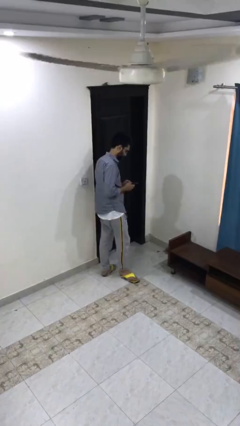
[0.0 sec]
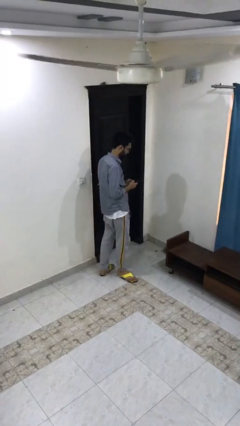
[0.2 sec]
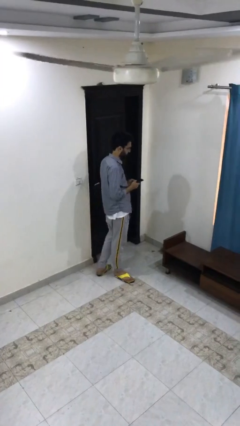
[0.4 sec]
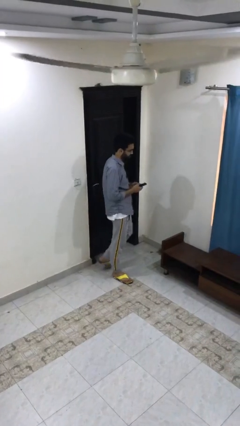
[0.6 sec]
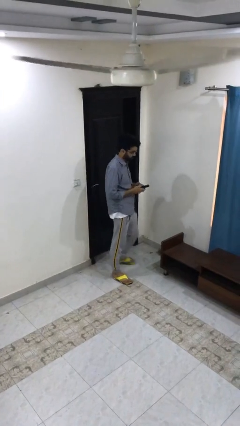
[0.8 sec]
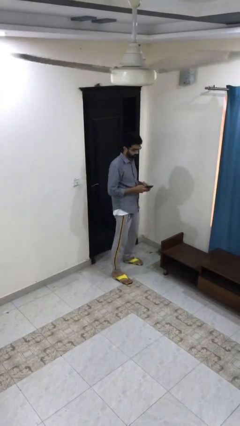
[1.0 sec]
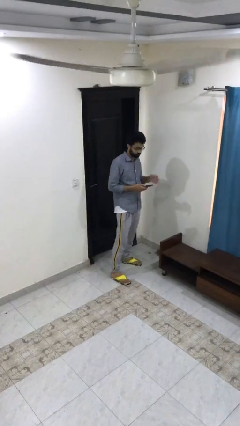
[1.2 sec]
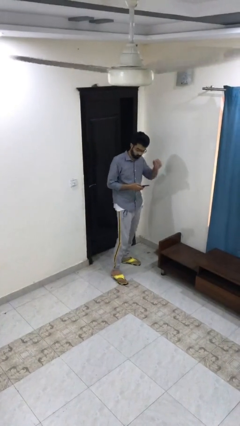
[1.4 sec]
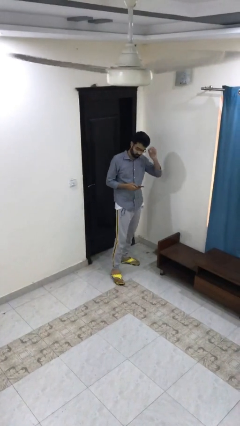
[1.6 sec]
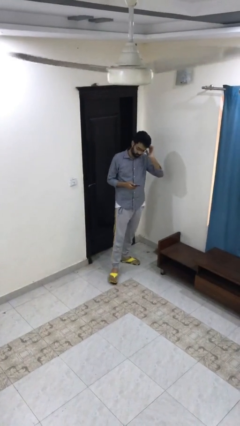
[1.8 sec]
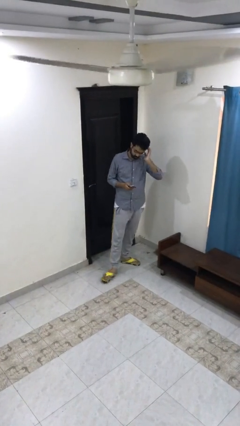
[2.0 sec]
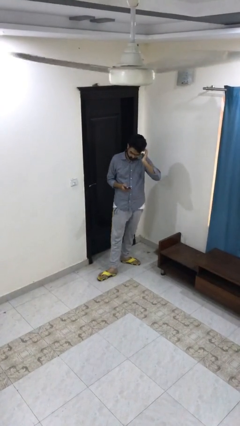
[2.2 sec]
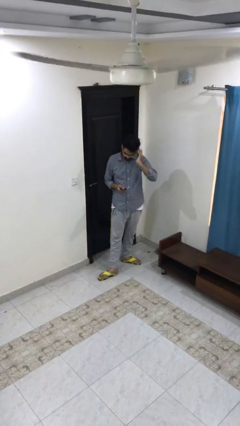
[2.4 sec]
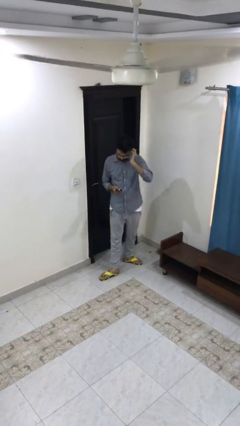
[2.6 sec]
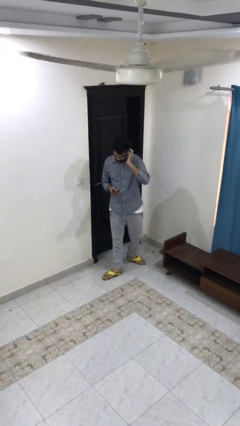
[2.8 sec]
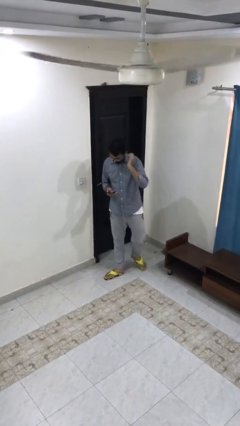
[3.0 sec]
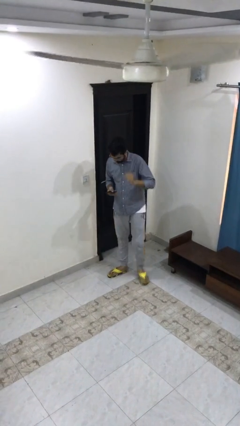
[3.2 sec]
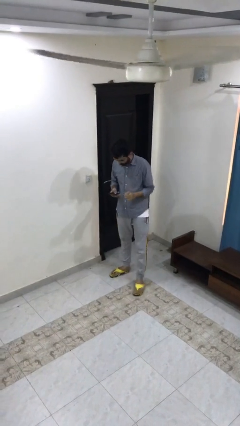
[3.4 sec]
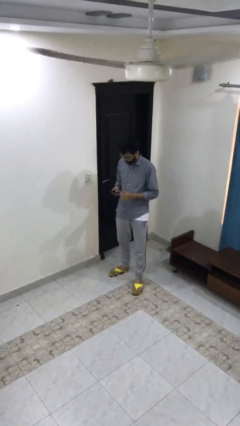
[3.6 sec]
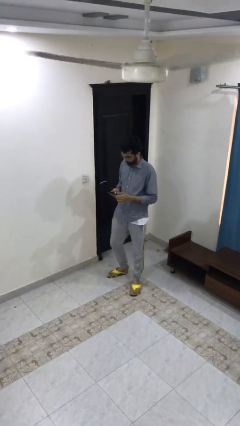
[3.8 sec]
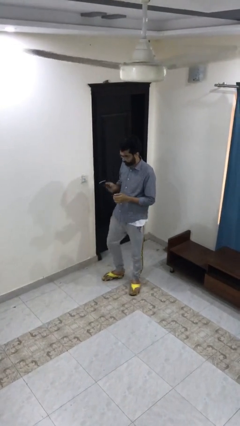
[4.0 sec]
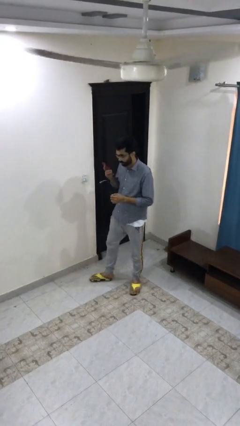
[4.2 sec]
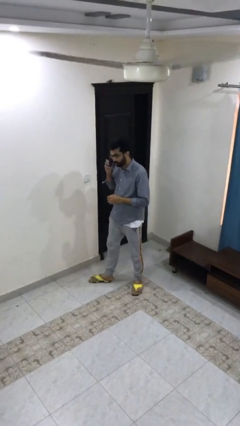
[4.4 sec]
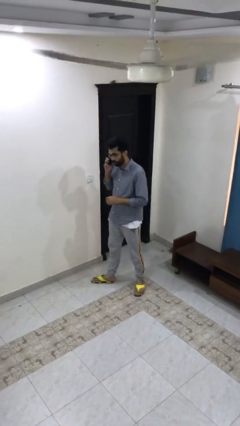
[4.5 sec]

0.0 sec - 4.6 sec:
person texts on phone

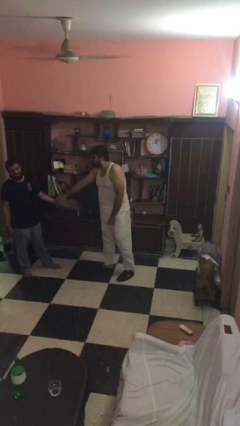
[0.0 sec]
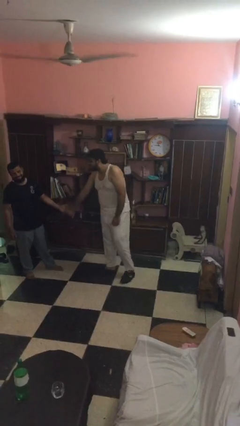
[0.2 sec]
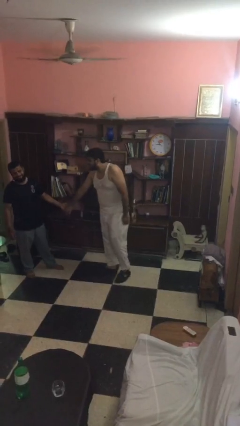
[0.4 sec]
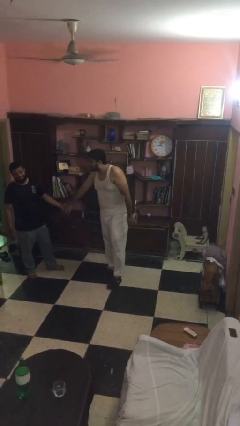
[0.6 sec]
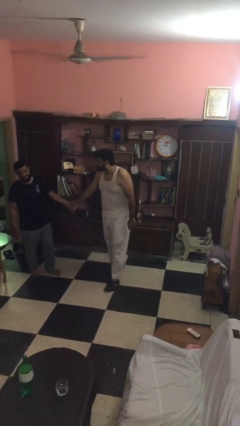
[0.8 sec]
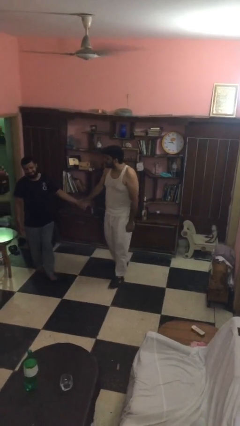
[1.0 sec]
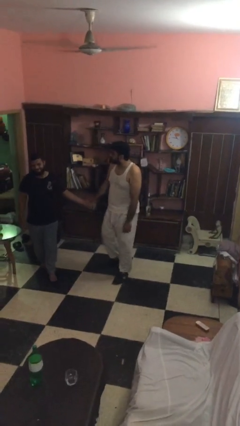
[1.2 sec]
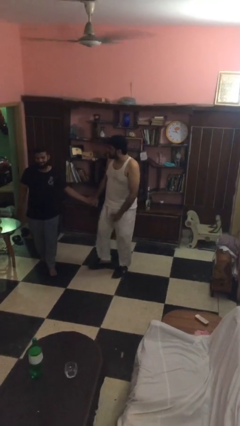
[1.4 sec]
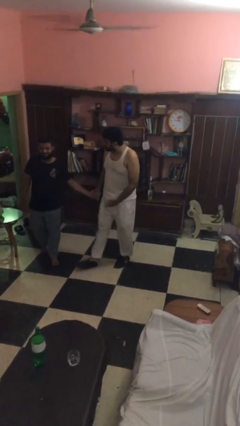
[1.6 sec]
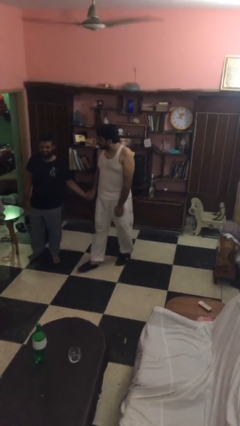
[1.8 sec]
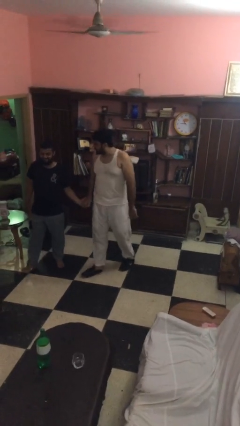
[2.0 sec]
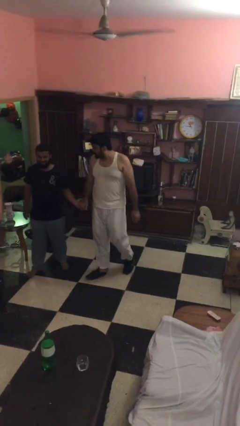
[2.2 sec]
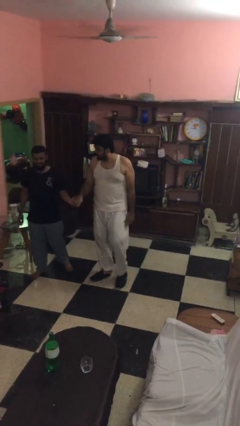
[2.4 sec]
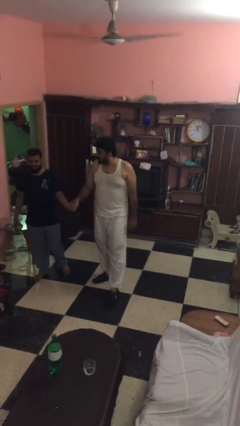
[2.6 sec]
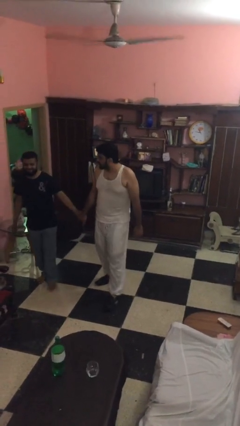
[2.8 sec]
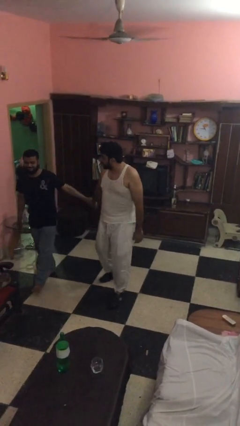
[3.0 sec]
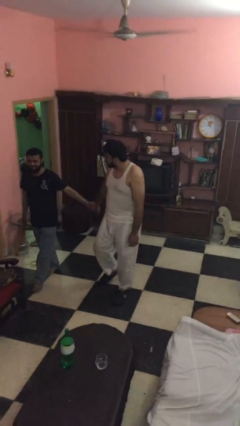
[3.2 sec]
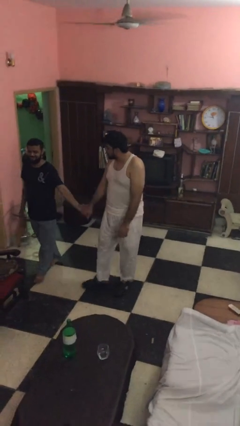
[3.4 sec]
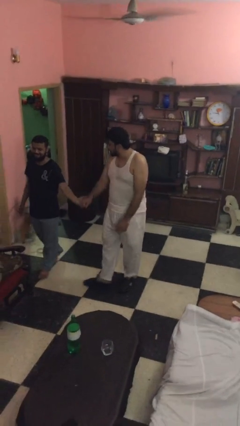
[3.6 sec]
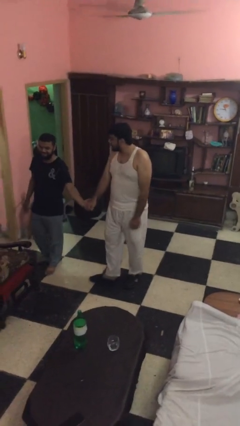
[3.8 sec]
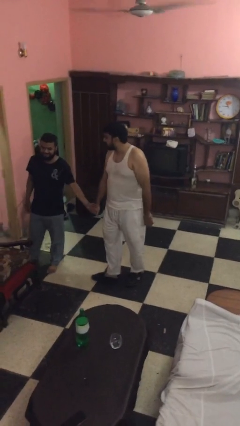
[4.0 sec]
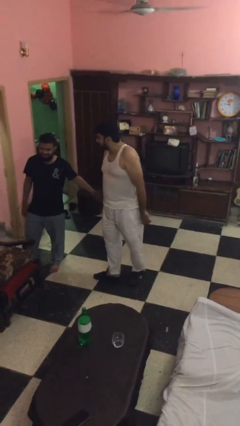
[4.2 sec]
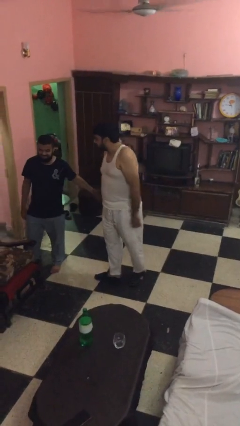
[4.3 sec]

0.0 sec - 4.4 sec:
person holds hand

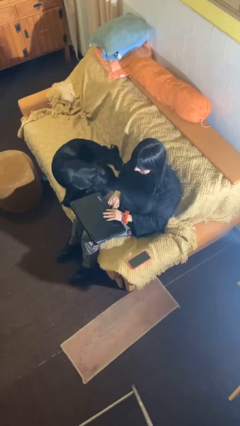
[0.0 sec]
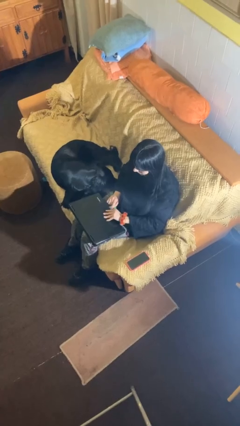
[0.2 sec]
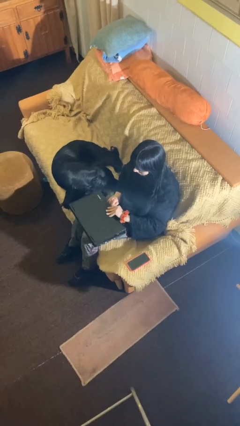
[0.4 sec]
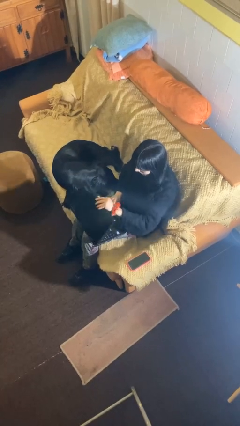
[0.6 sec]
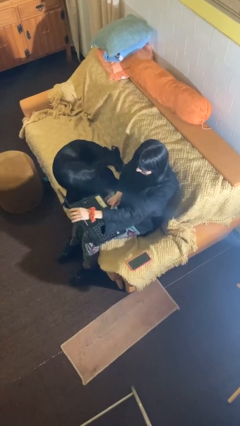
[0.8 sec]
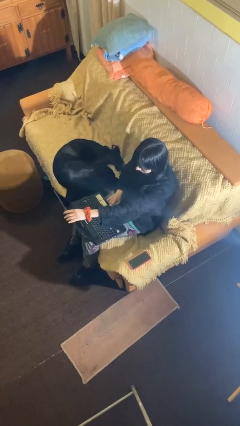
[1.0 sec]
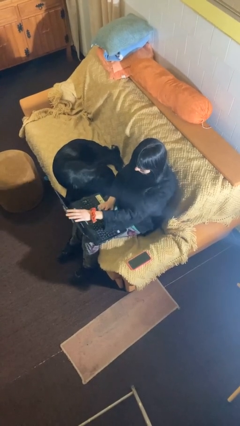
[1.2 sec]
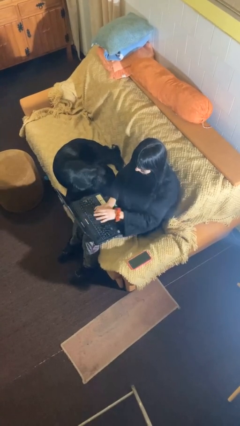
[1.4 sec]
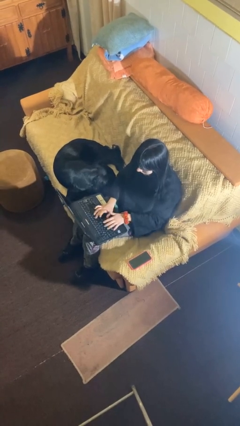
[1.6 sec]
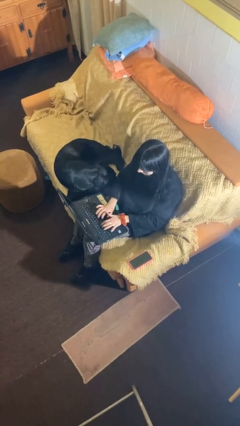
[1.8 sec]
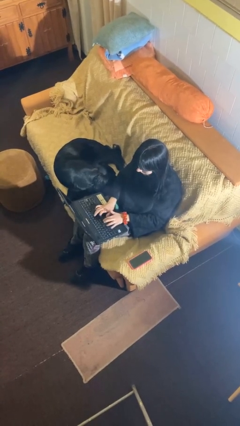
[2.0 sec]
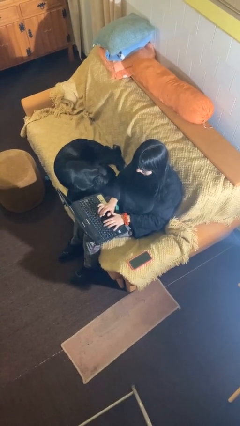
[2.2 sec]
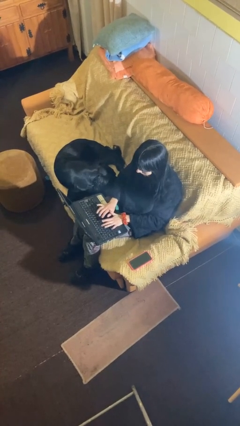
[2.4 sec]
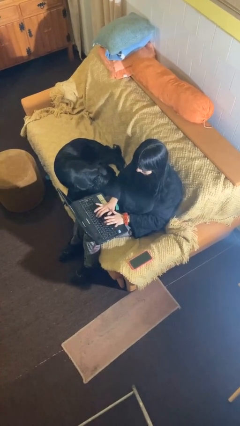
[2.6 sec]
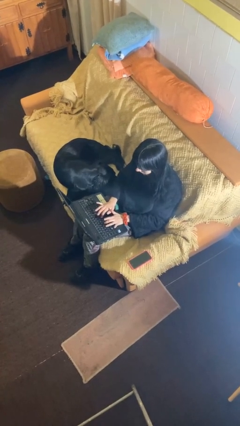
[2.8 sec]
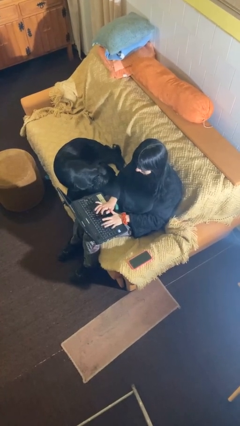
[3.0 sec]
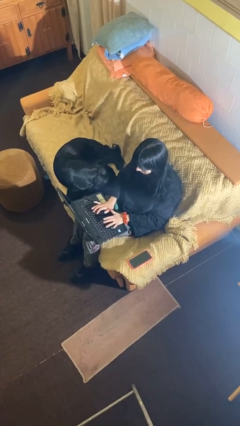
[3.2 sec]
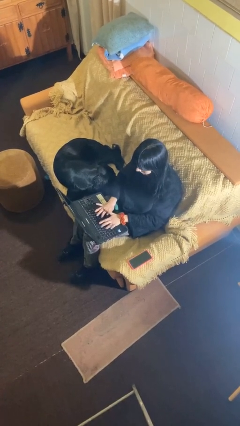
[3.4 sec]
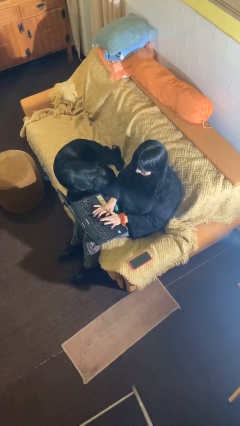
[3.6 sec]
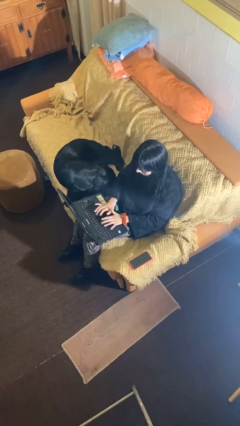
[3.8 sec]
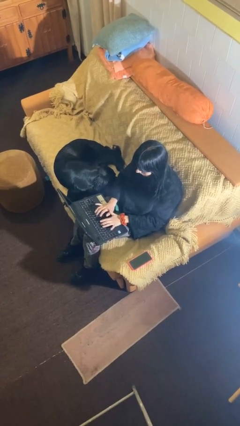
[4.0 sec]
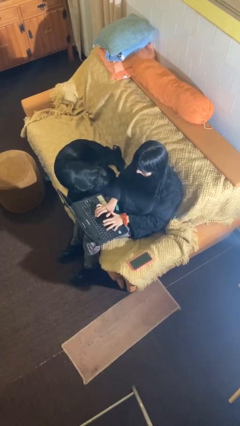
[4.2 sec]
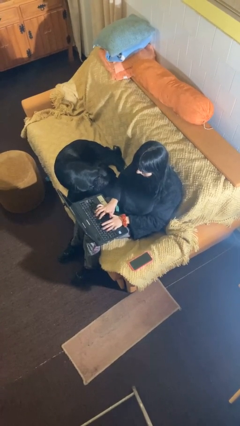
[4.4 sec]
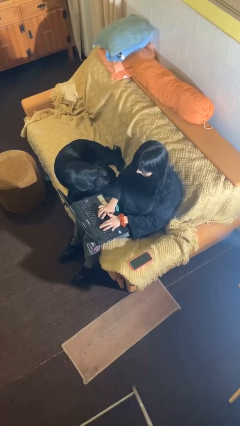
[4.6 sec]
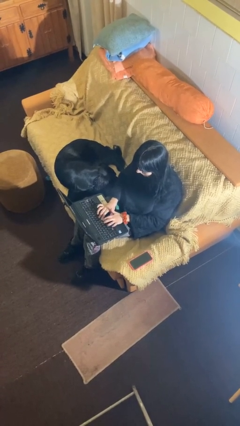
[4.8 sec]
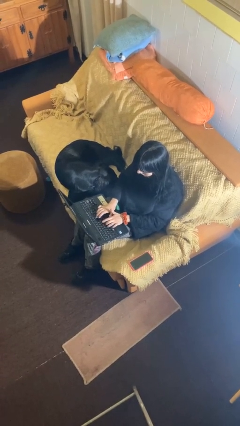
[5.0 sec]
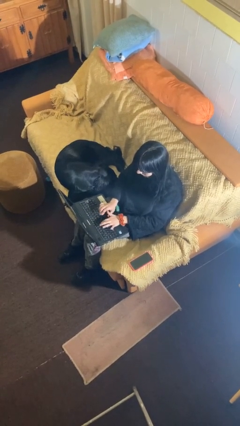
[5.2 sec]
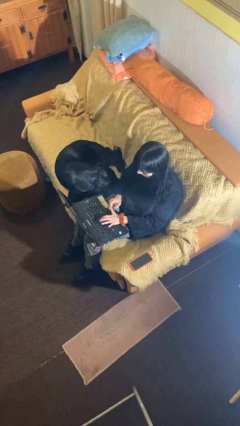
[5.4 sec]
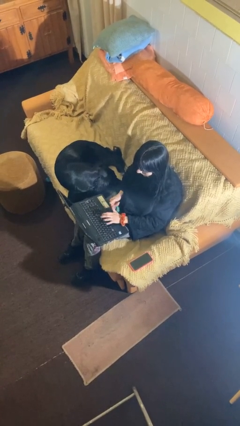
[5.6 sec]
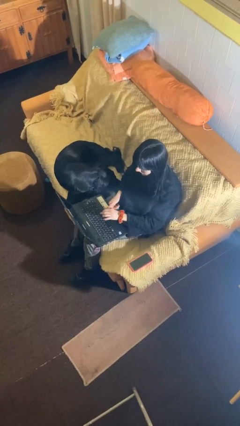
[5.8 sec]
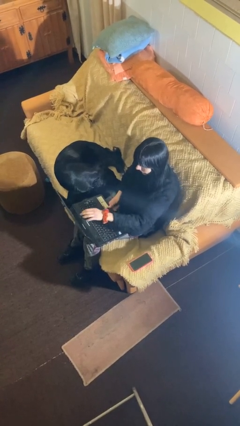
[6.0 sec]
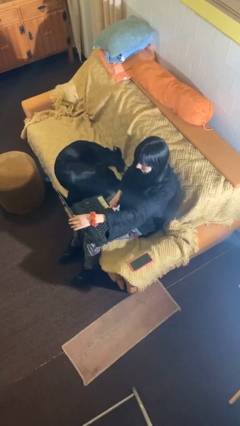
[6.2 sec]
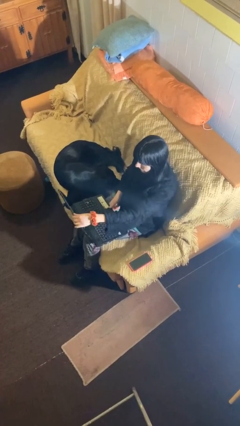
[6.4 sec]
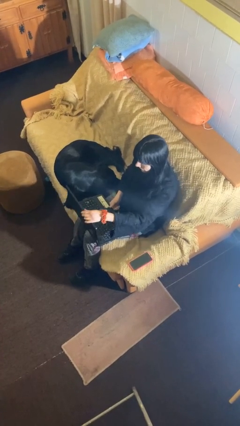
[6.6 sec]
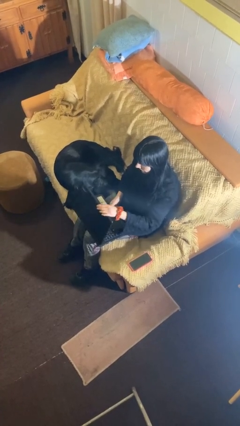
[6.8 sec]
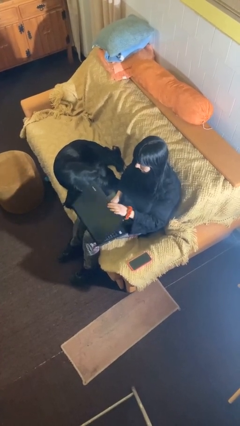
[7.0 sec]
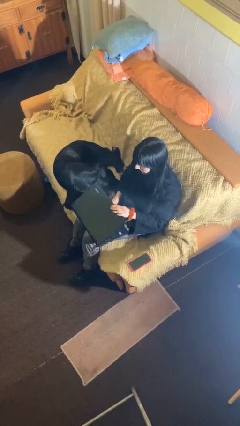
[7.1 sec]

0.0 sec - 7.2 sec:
person interacts with laptop

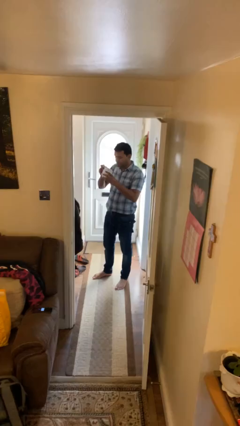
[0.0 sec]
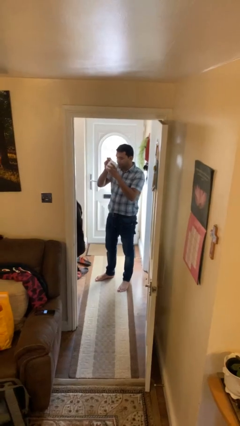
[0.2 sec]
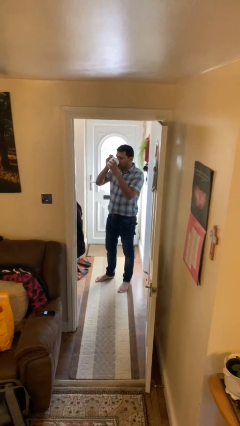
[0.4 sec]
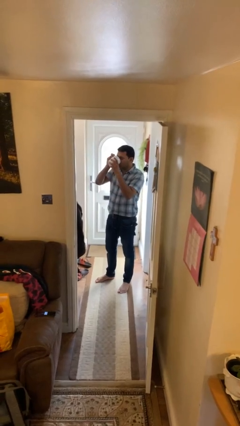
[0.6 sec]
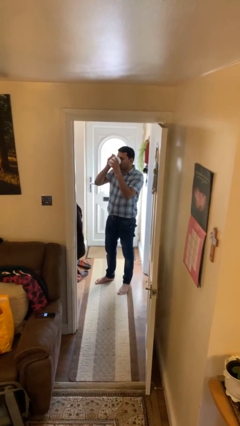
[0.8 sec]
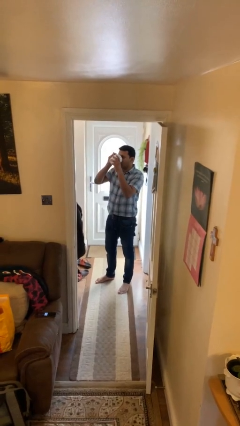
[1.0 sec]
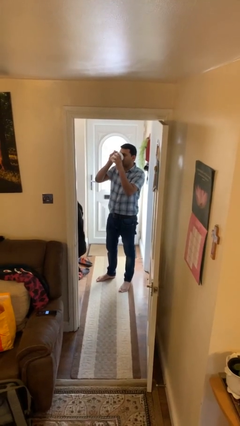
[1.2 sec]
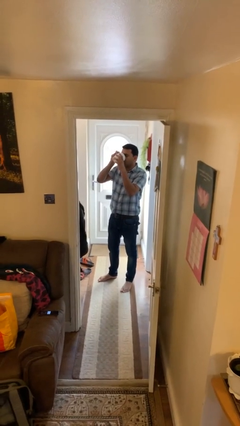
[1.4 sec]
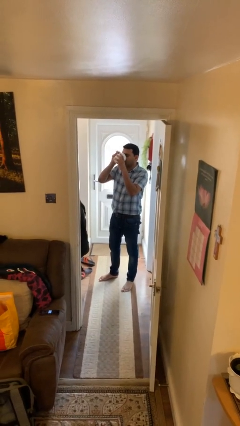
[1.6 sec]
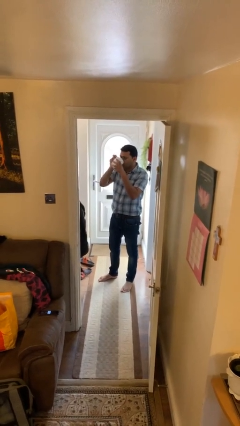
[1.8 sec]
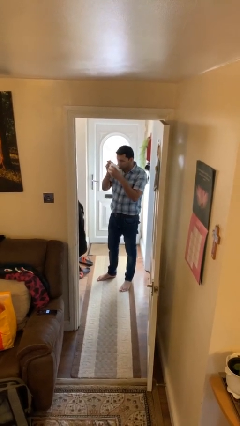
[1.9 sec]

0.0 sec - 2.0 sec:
person drinks from mug
